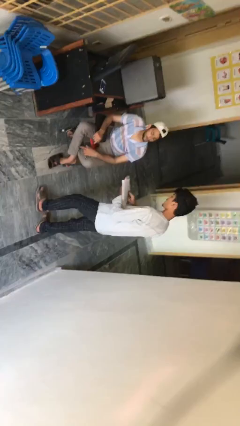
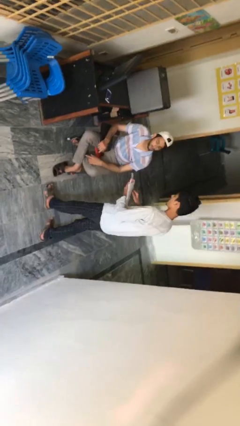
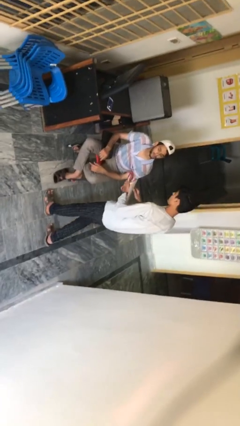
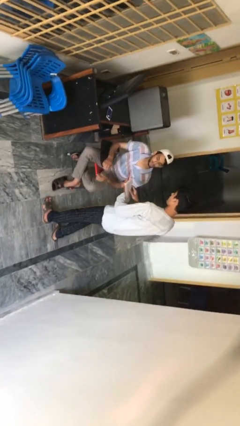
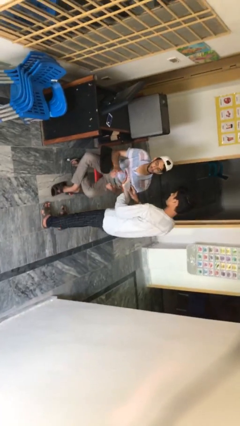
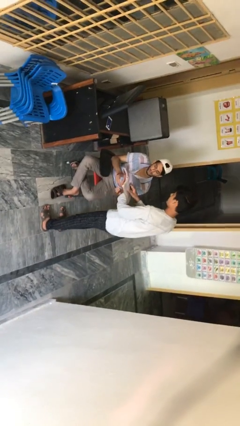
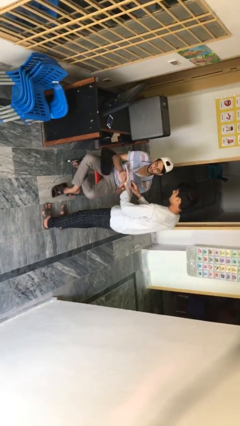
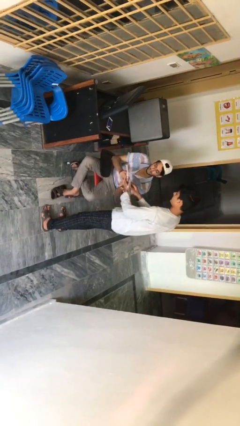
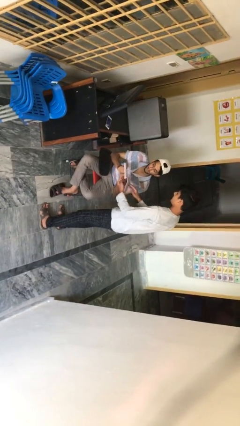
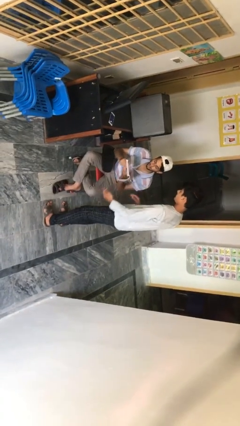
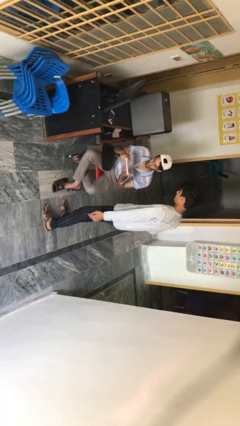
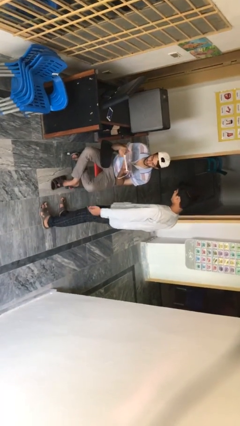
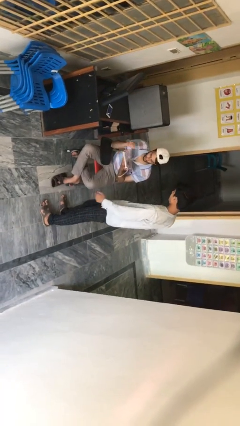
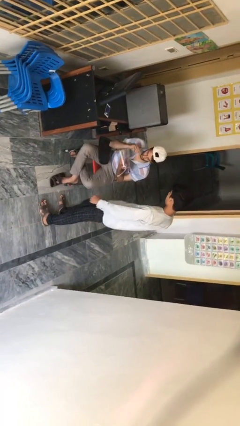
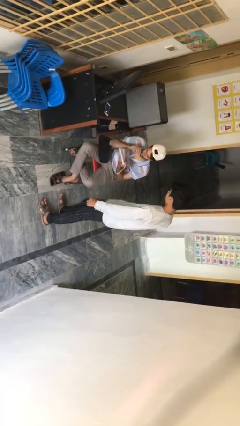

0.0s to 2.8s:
person transfers object to person

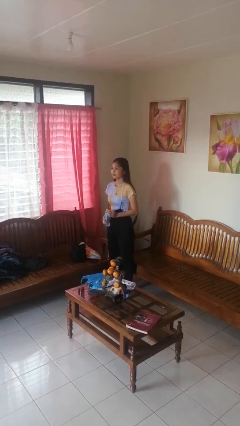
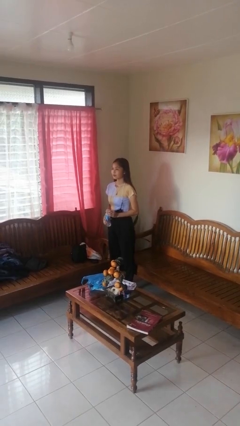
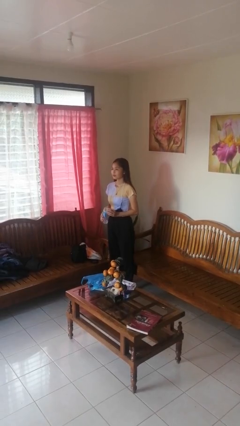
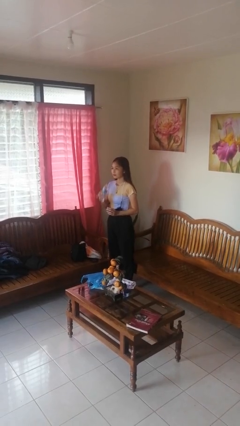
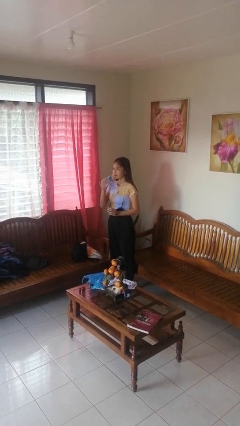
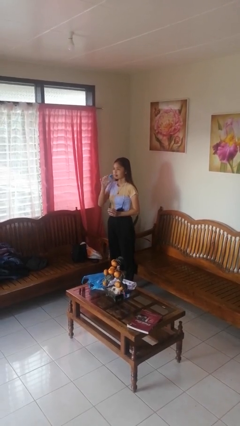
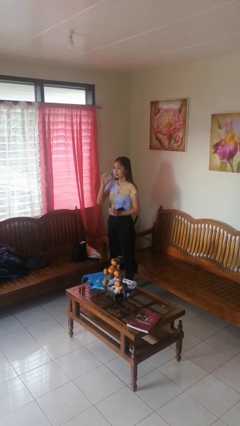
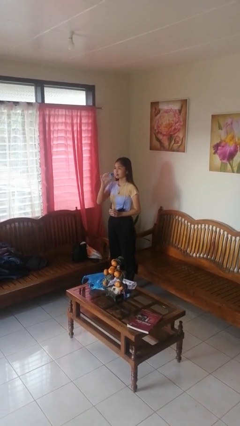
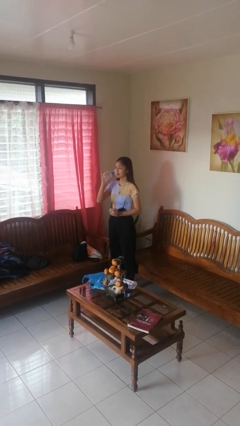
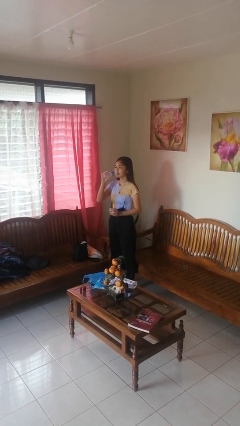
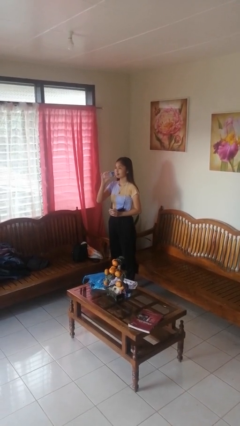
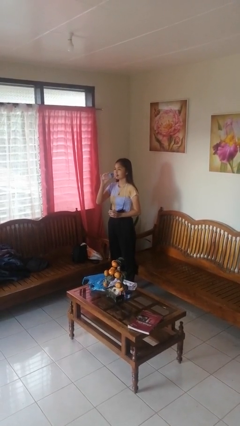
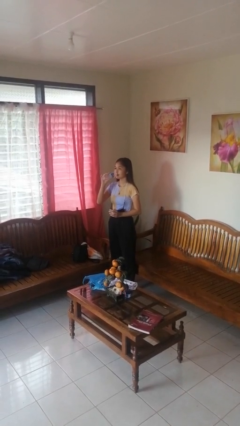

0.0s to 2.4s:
person drinks from bottle

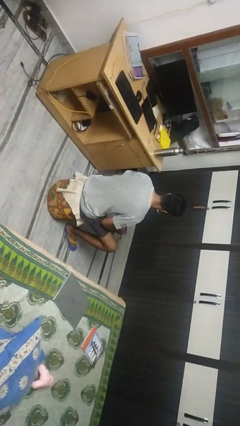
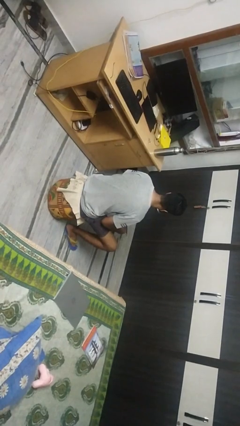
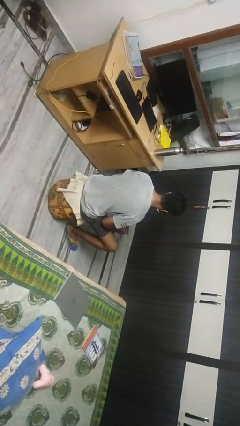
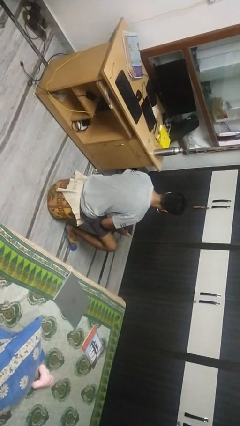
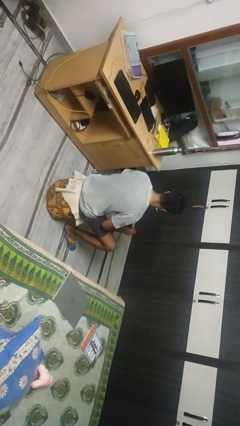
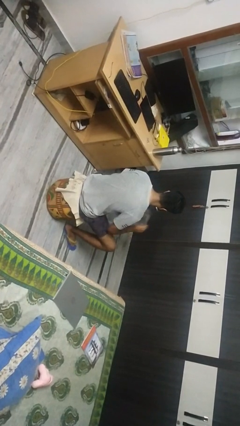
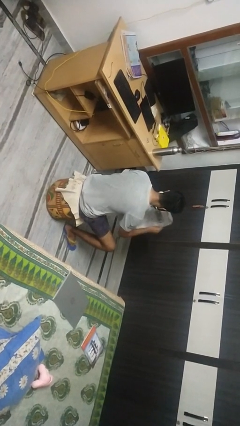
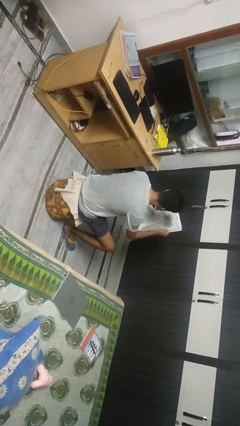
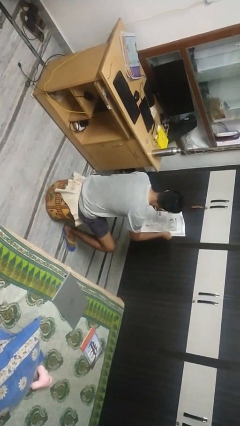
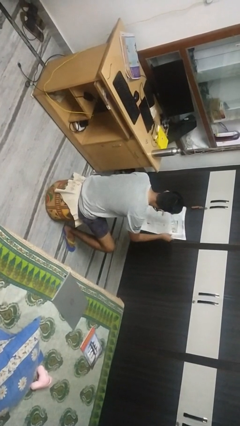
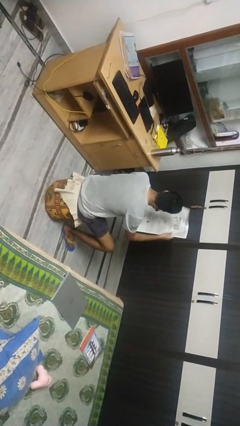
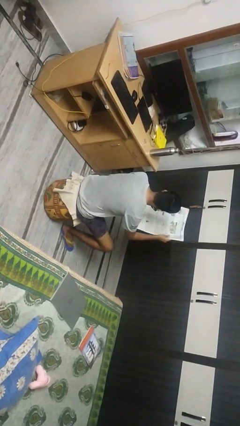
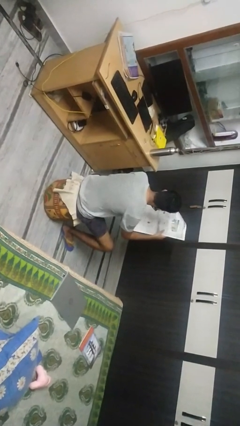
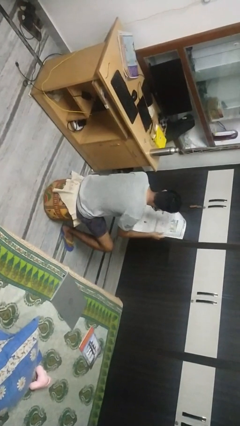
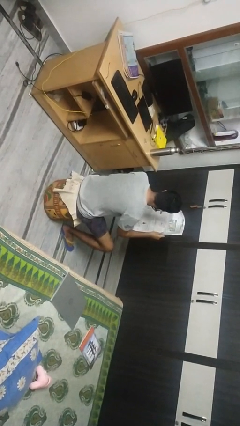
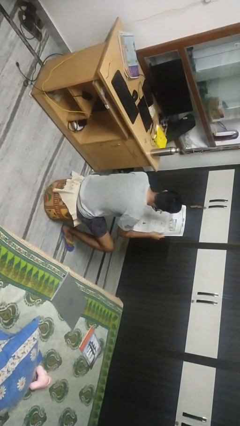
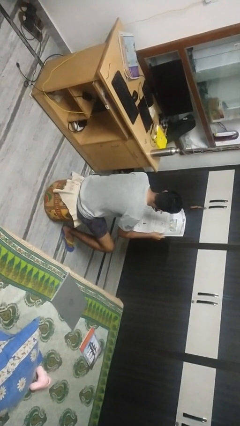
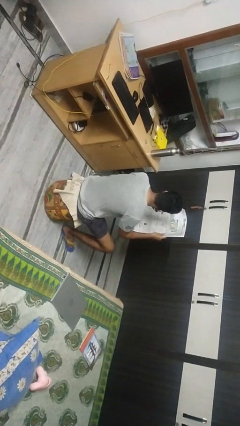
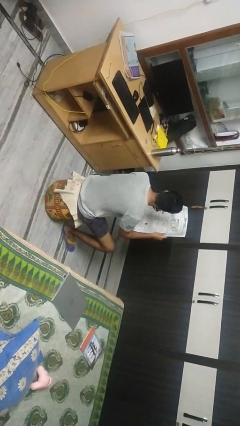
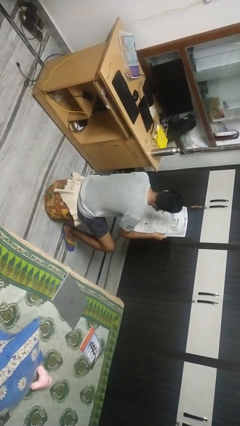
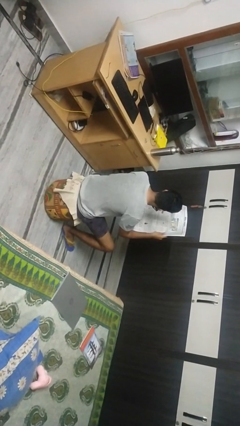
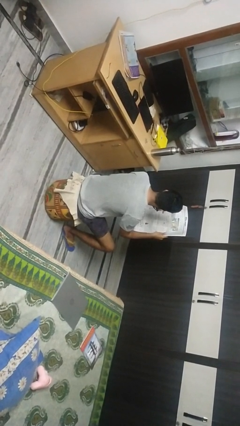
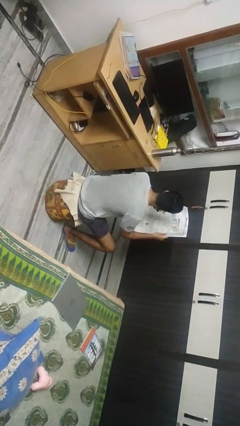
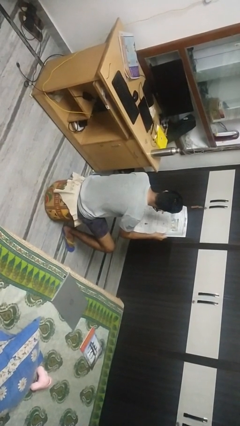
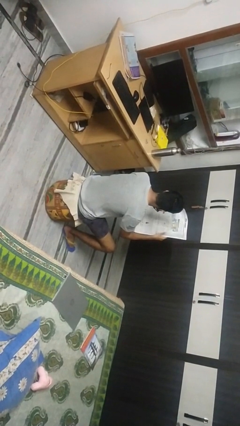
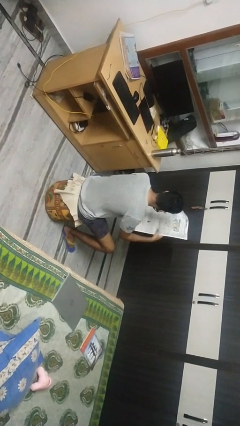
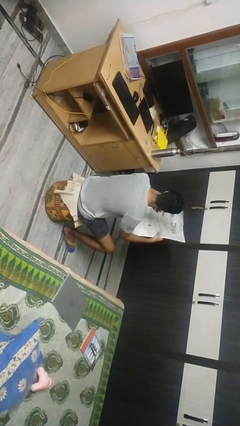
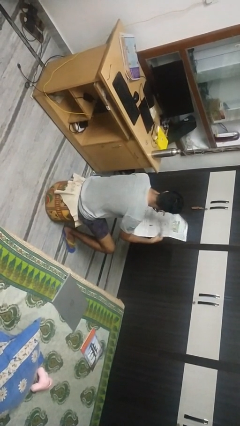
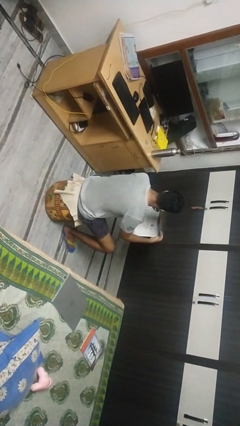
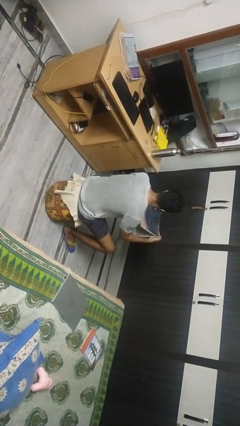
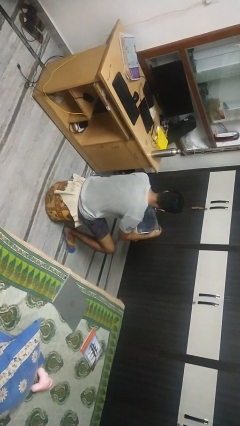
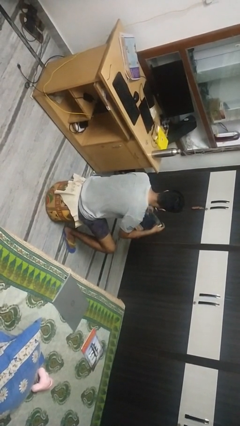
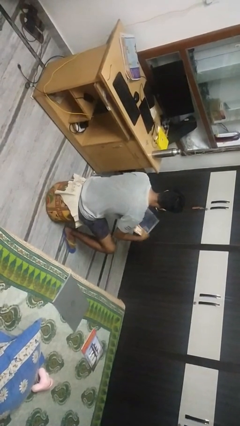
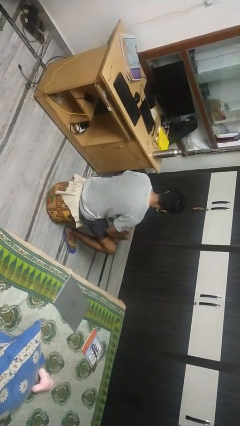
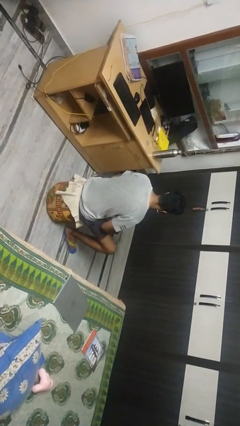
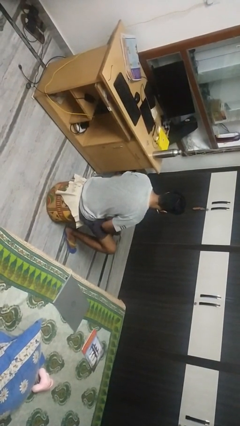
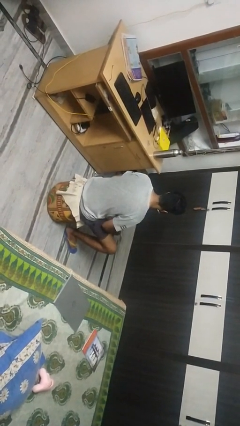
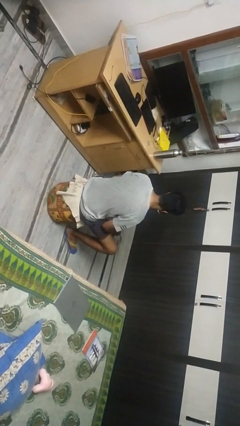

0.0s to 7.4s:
person reads newspaper

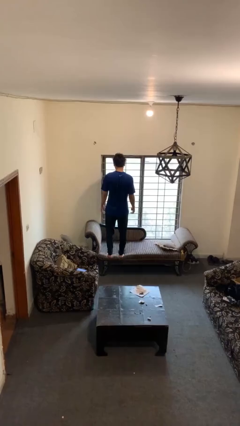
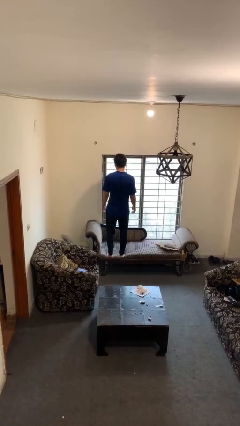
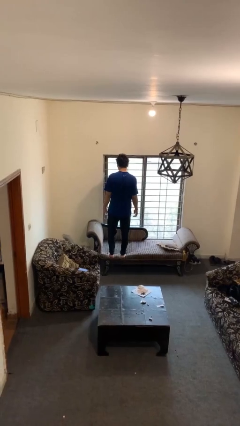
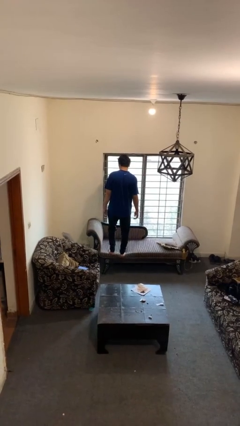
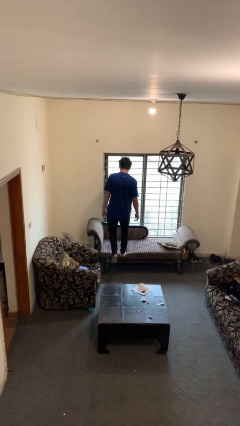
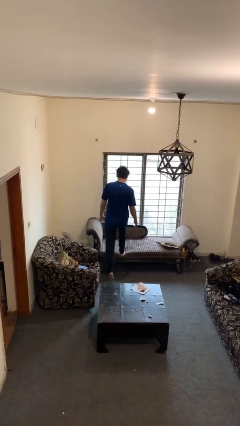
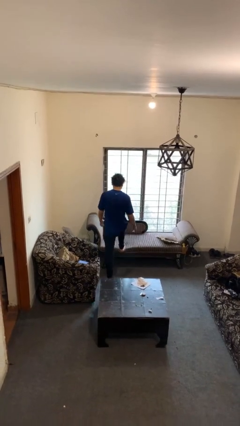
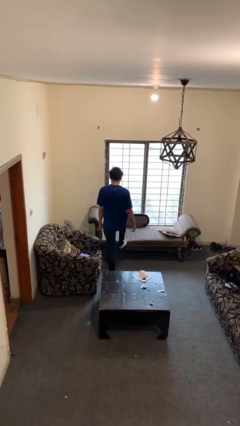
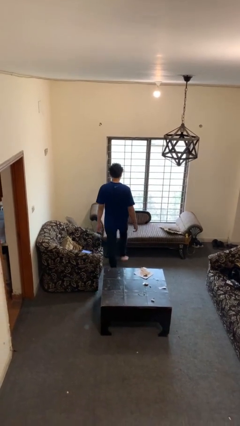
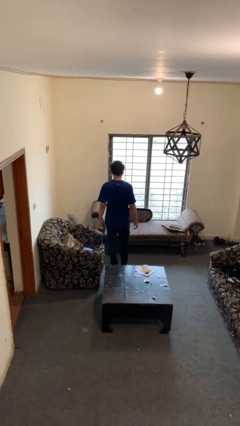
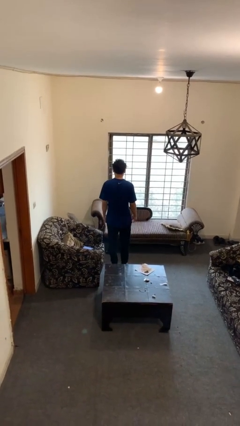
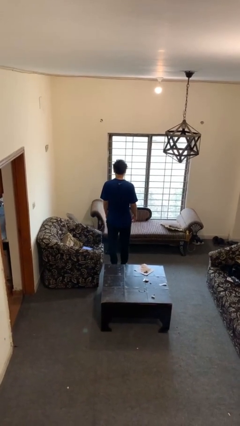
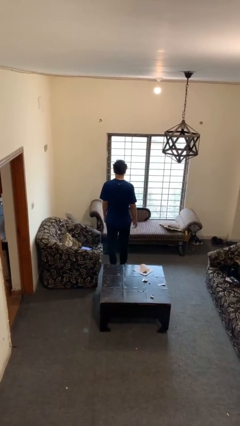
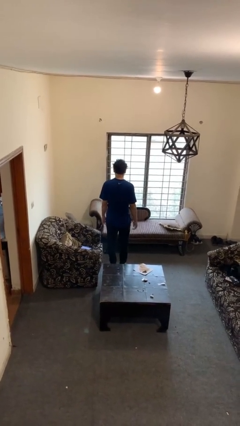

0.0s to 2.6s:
person climbs off couch

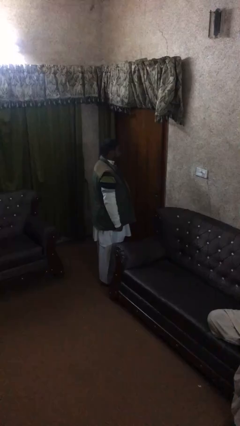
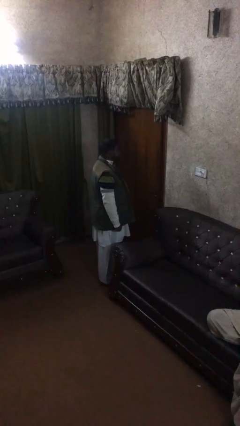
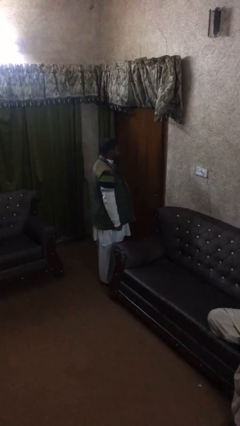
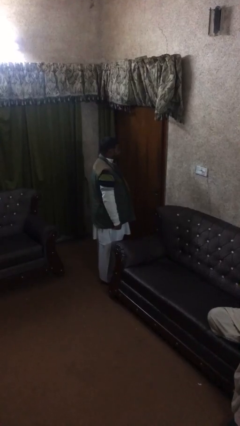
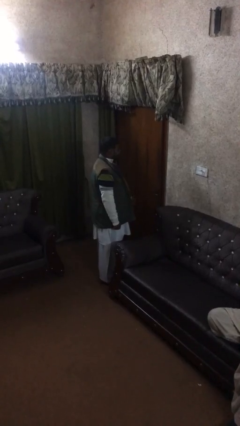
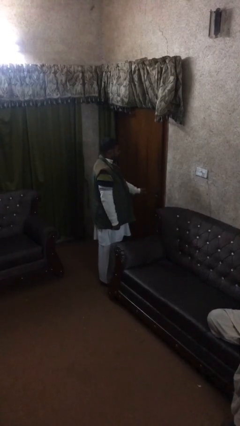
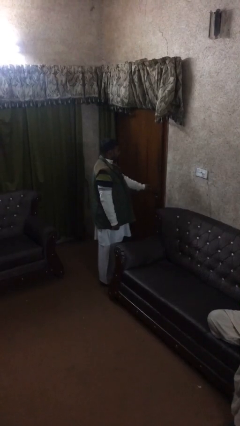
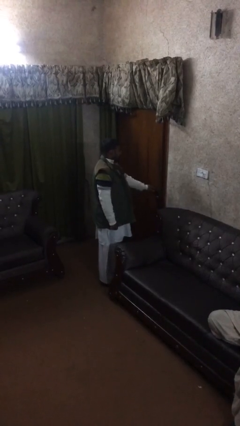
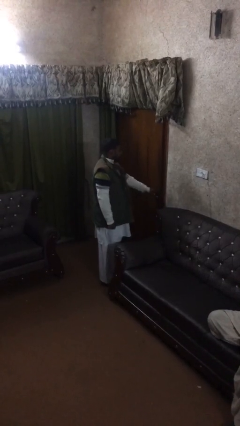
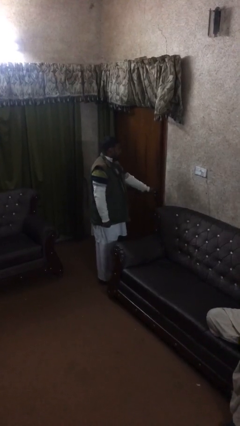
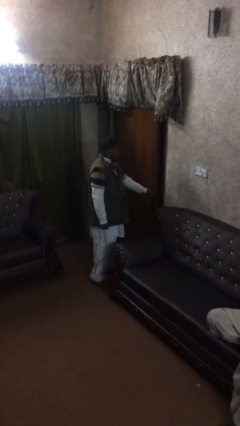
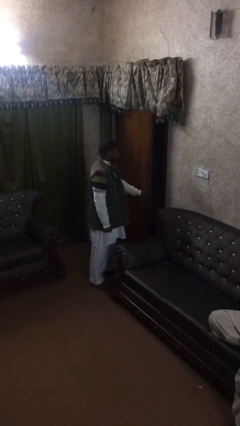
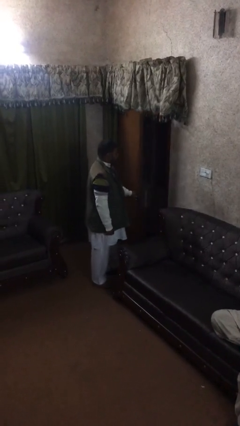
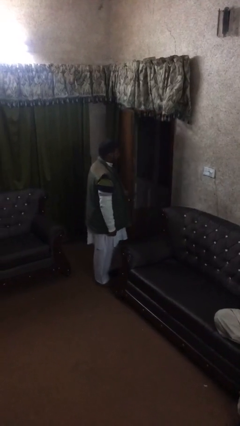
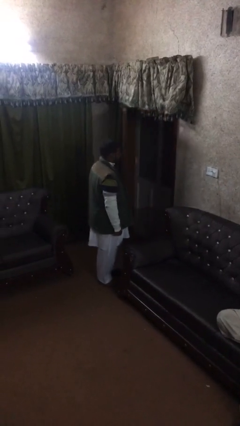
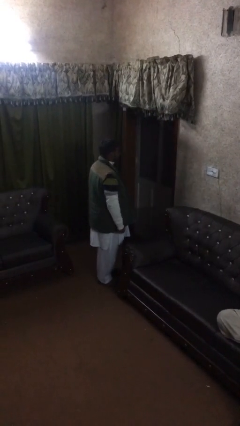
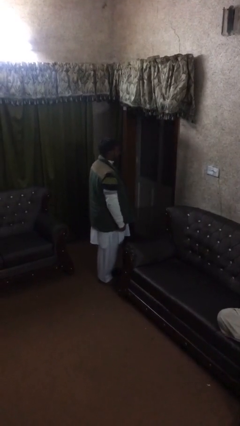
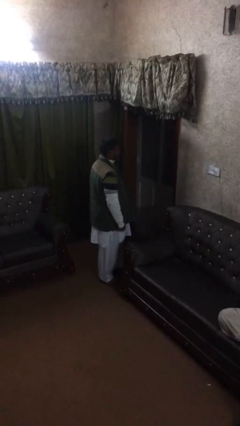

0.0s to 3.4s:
person opens facility door
